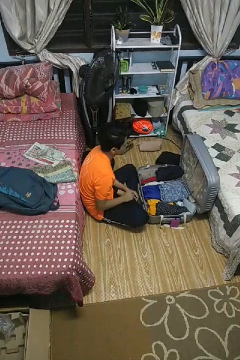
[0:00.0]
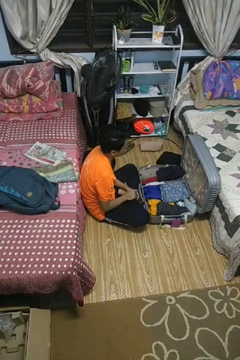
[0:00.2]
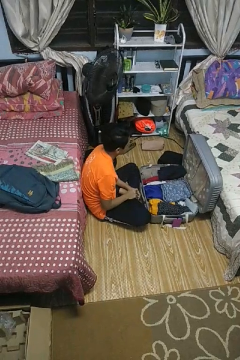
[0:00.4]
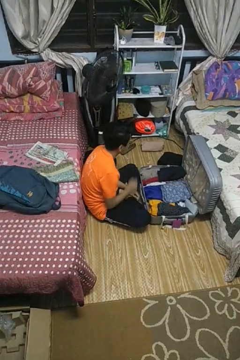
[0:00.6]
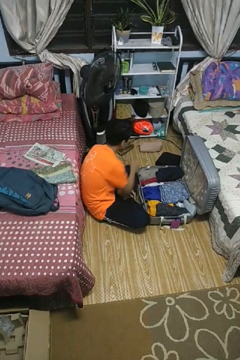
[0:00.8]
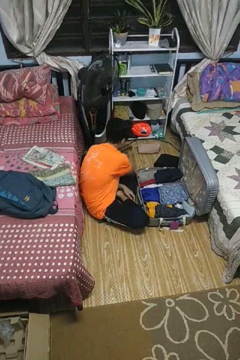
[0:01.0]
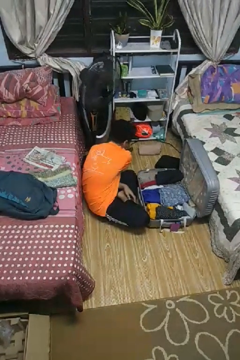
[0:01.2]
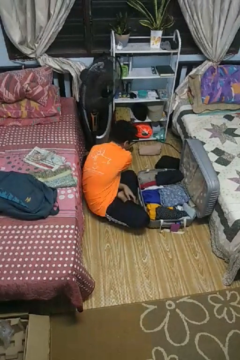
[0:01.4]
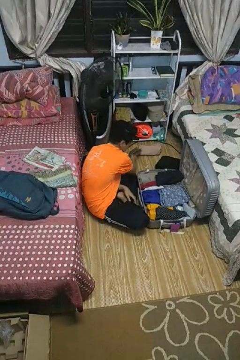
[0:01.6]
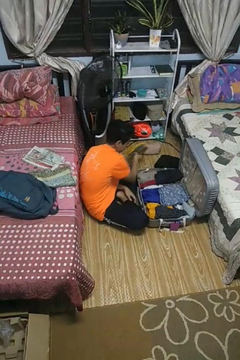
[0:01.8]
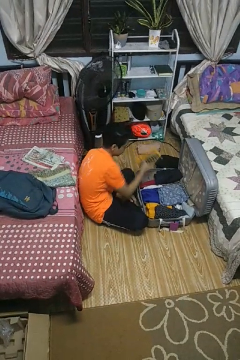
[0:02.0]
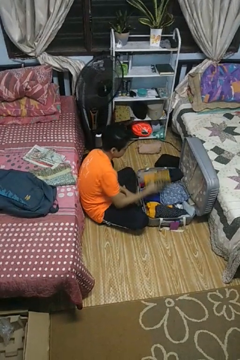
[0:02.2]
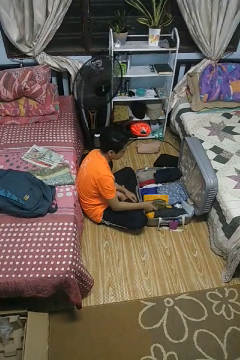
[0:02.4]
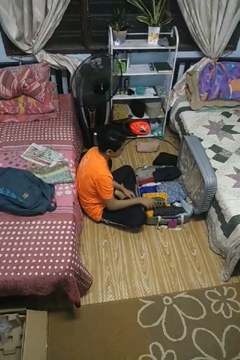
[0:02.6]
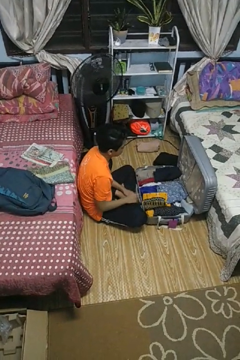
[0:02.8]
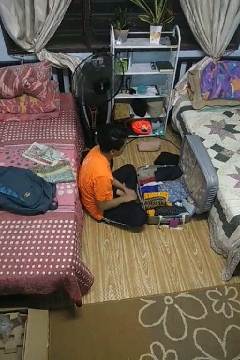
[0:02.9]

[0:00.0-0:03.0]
person loads clothes into suitcase

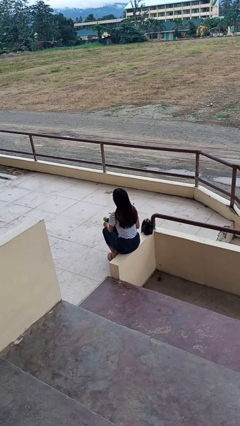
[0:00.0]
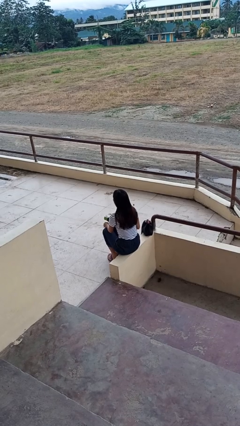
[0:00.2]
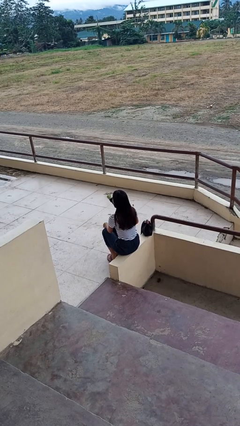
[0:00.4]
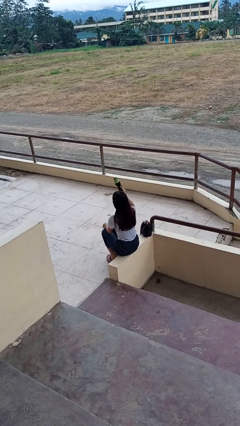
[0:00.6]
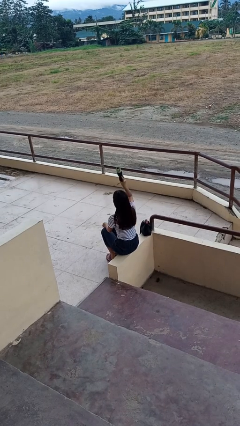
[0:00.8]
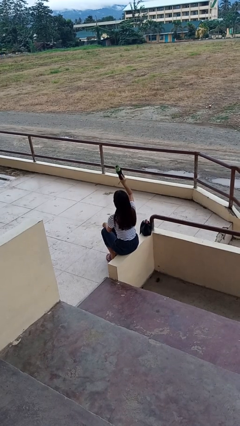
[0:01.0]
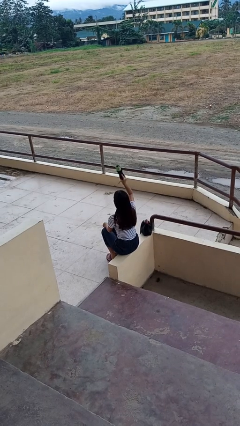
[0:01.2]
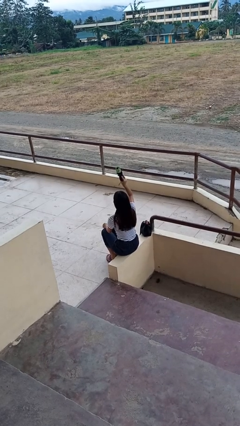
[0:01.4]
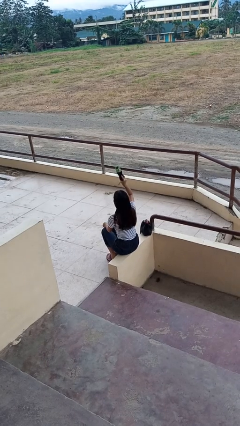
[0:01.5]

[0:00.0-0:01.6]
person holds object above head

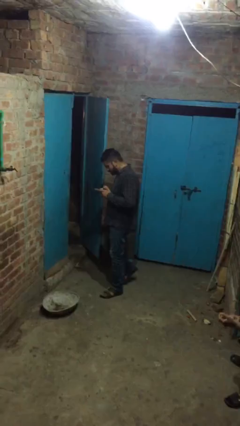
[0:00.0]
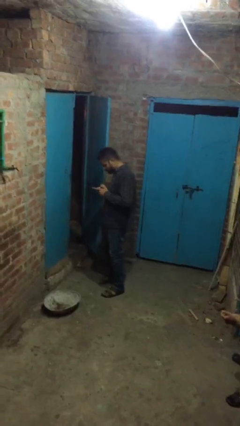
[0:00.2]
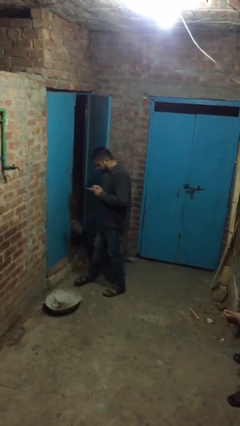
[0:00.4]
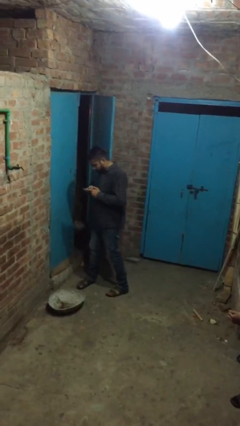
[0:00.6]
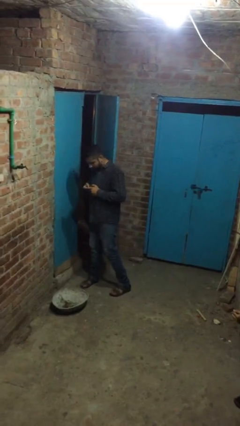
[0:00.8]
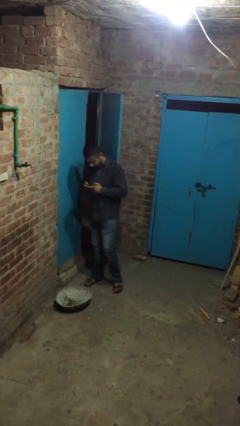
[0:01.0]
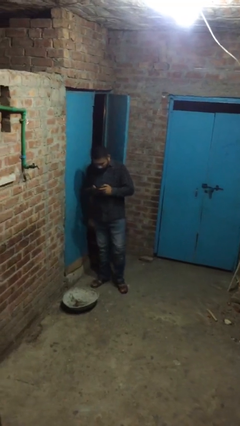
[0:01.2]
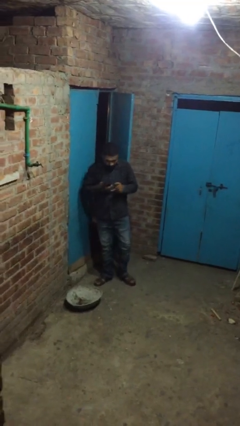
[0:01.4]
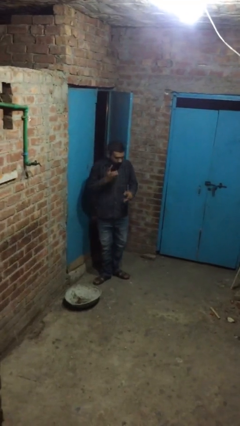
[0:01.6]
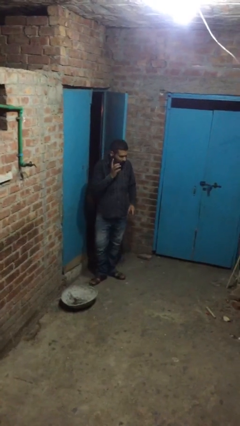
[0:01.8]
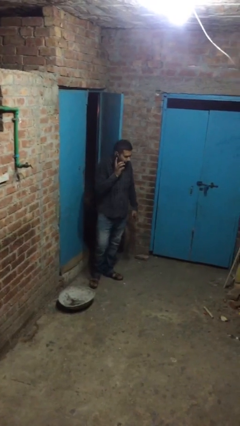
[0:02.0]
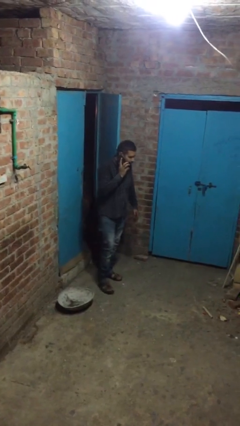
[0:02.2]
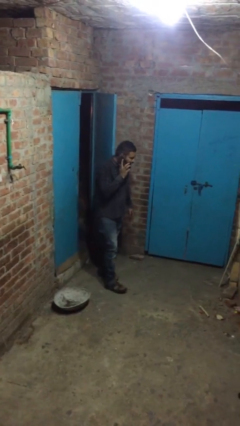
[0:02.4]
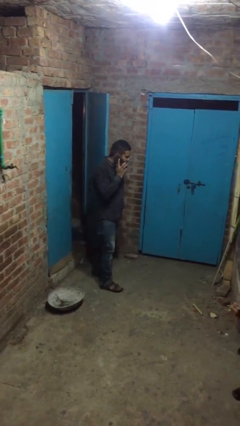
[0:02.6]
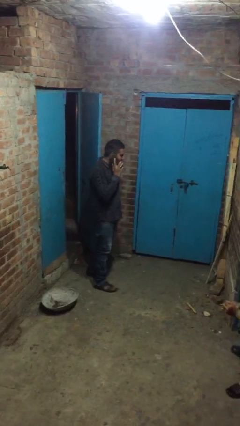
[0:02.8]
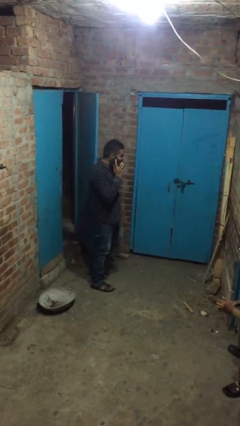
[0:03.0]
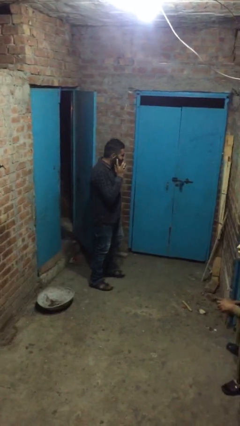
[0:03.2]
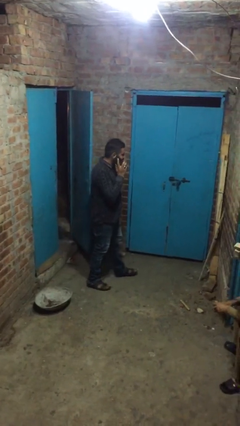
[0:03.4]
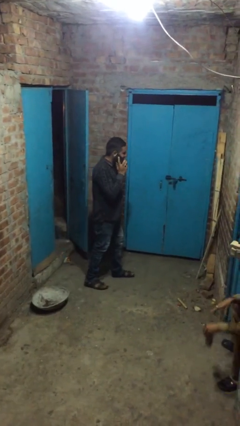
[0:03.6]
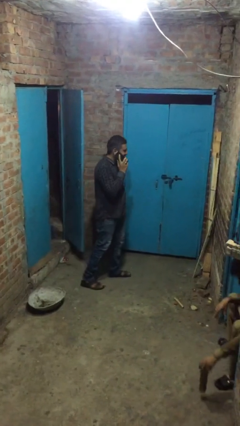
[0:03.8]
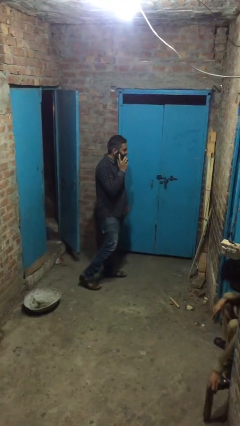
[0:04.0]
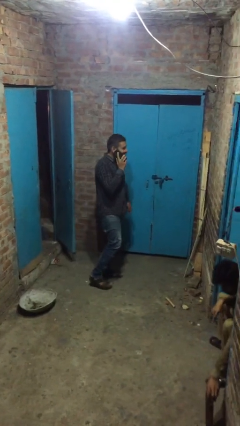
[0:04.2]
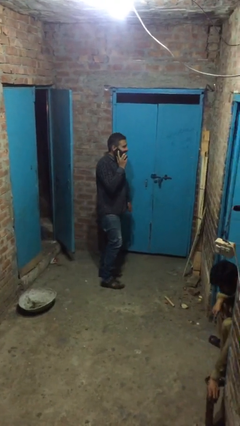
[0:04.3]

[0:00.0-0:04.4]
person talks on phone

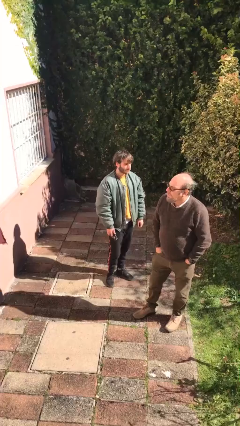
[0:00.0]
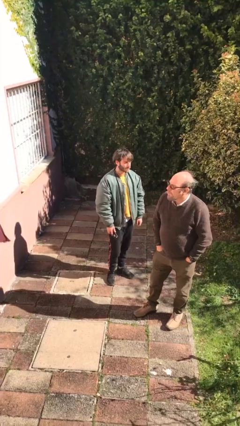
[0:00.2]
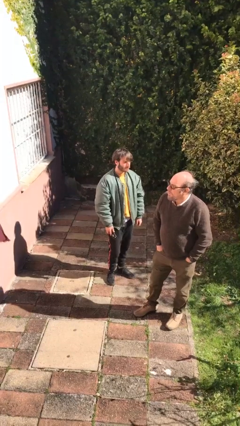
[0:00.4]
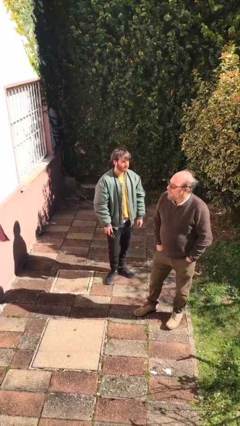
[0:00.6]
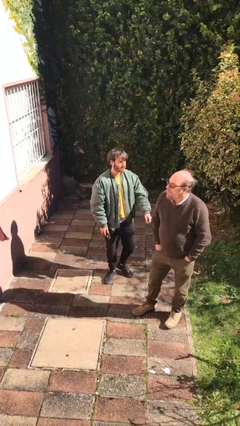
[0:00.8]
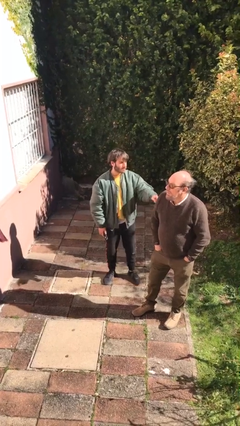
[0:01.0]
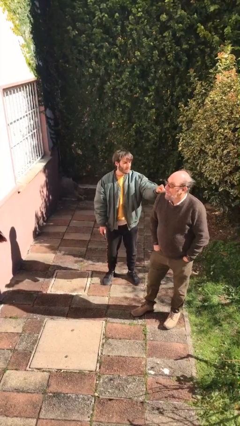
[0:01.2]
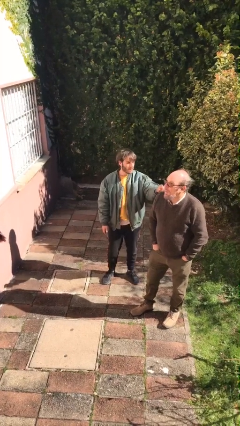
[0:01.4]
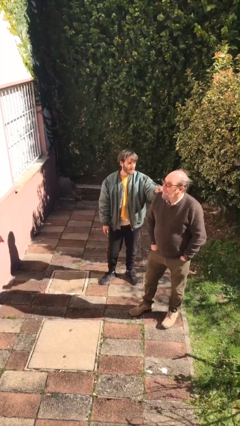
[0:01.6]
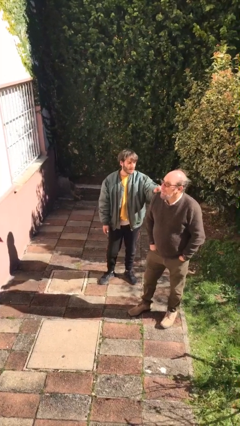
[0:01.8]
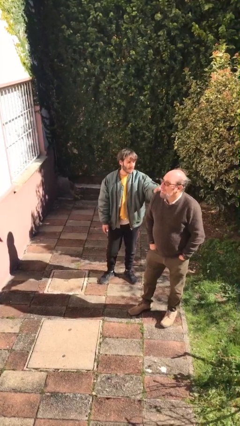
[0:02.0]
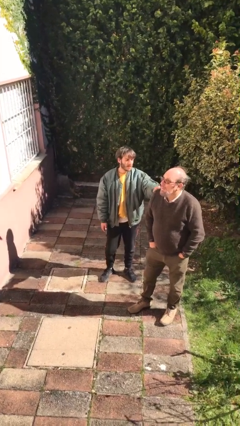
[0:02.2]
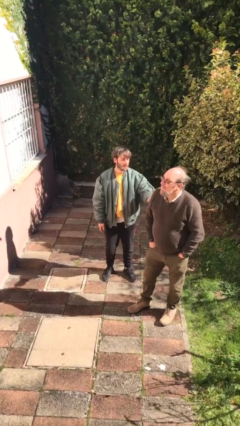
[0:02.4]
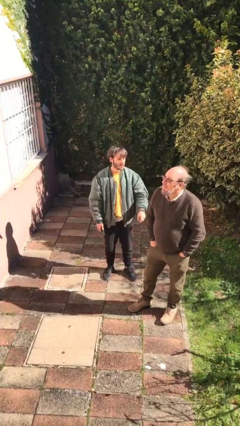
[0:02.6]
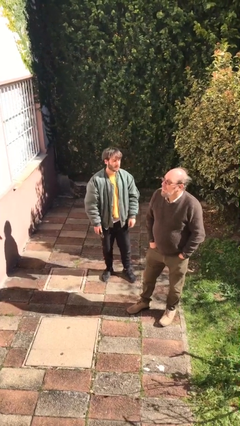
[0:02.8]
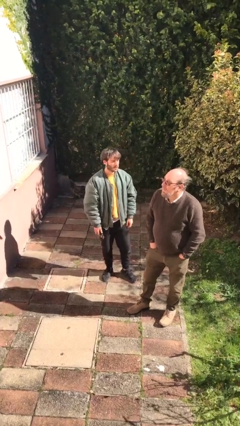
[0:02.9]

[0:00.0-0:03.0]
person touches back of person

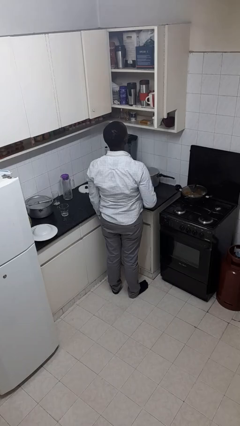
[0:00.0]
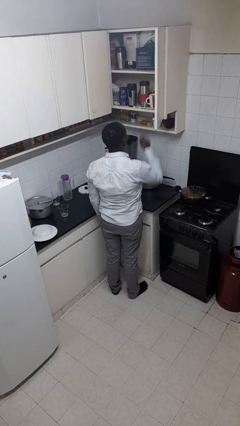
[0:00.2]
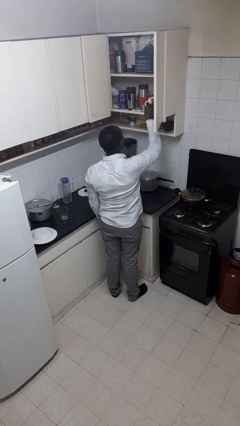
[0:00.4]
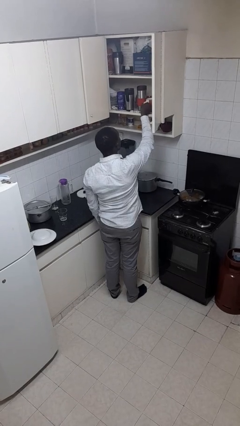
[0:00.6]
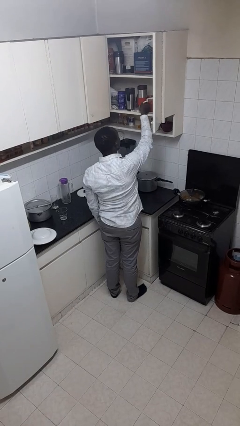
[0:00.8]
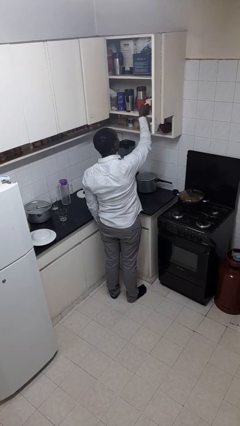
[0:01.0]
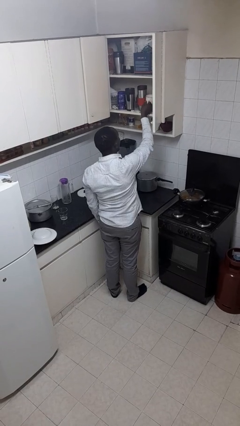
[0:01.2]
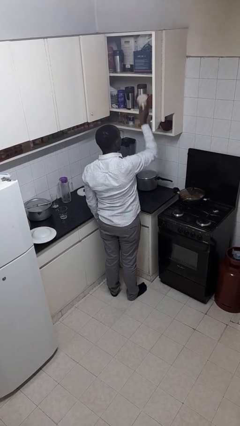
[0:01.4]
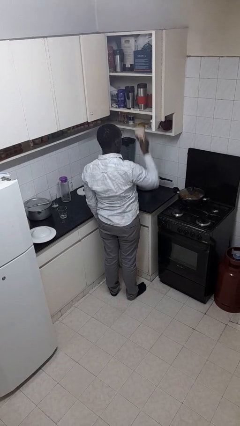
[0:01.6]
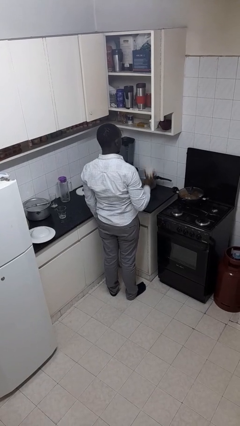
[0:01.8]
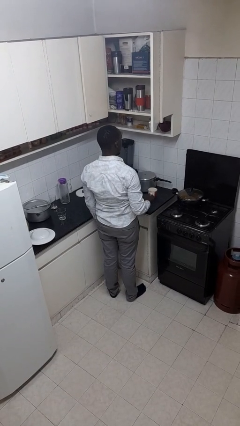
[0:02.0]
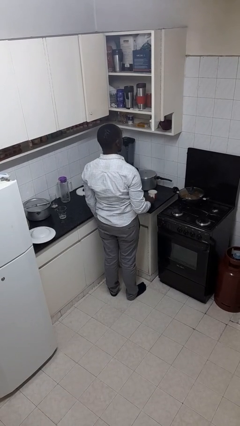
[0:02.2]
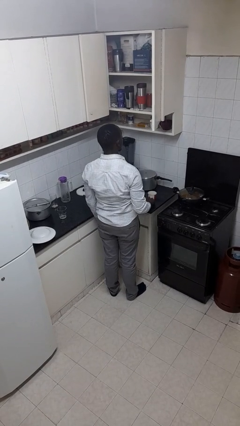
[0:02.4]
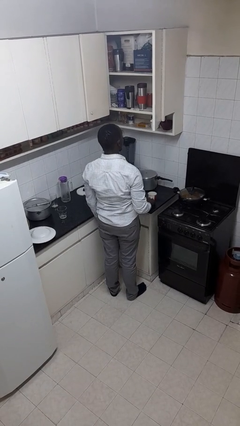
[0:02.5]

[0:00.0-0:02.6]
person takes object from cabinet

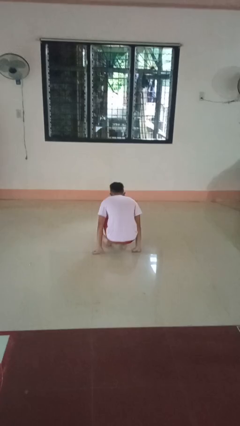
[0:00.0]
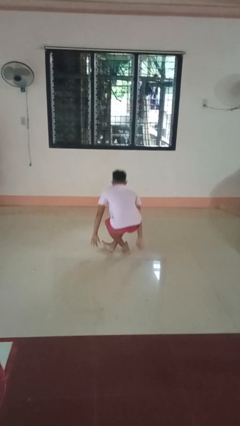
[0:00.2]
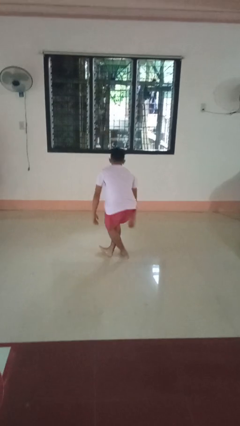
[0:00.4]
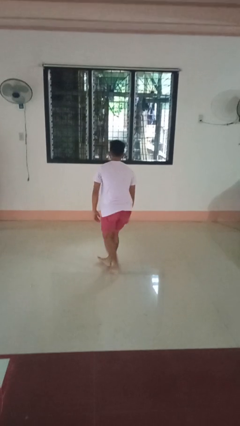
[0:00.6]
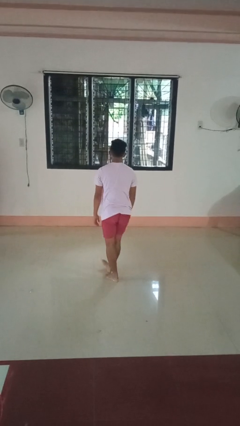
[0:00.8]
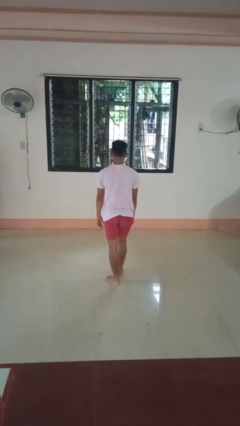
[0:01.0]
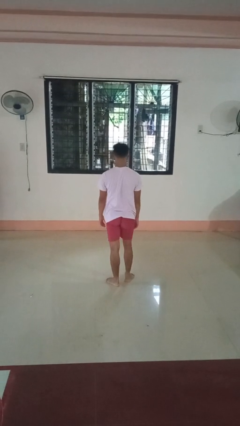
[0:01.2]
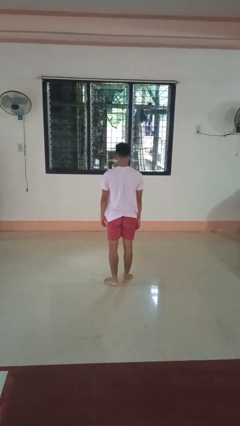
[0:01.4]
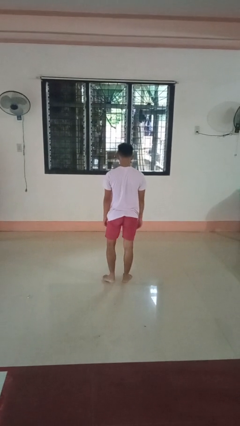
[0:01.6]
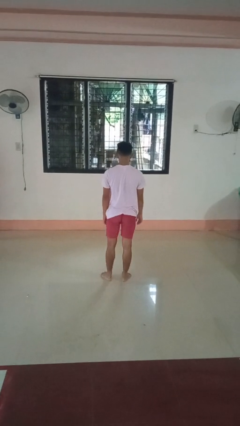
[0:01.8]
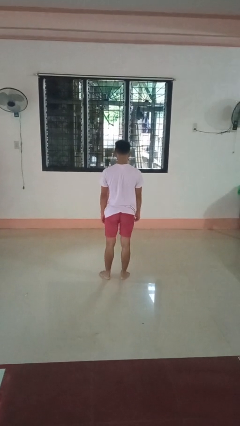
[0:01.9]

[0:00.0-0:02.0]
person stands up from floor

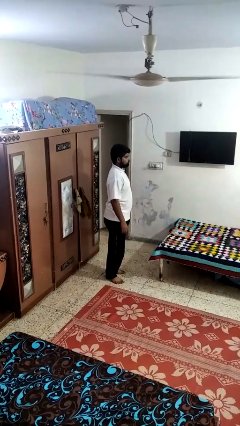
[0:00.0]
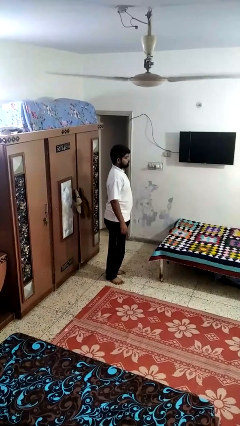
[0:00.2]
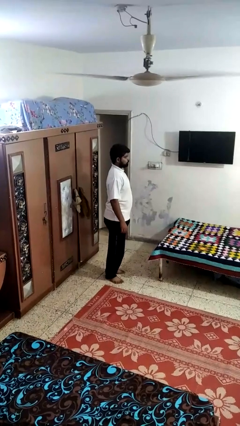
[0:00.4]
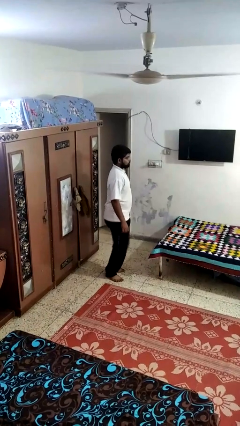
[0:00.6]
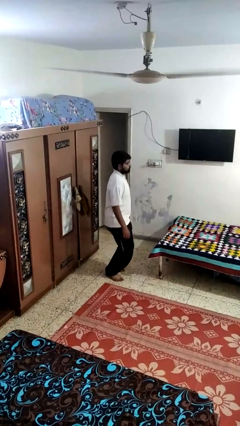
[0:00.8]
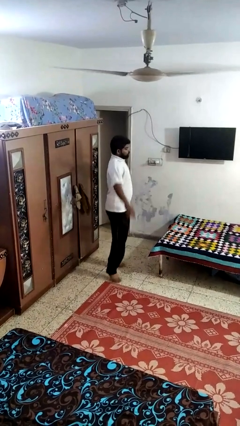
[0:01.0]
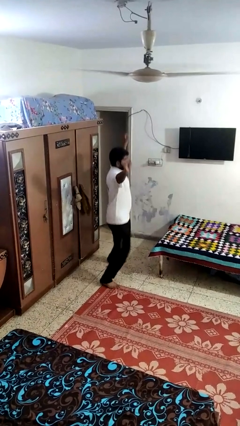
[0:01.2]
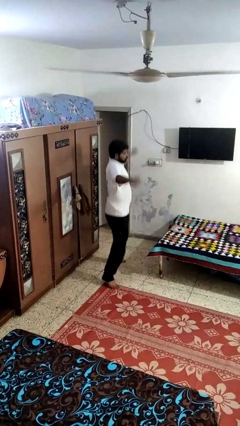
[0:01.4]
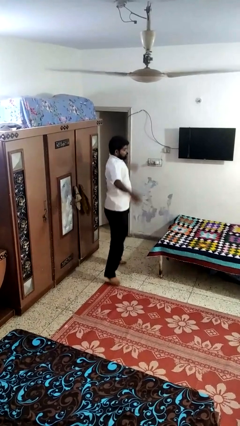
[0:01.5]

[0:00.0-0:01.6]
person exercises with jumping jacks
